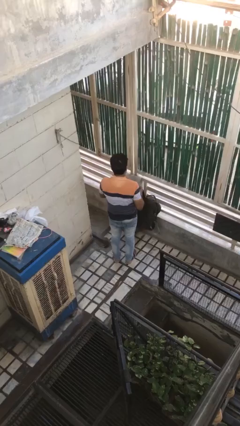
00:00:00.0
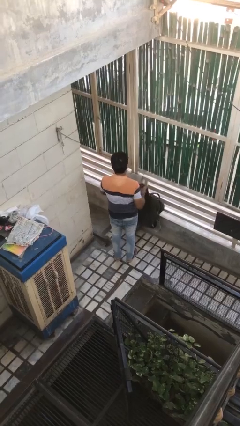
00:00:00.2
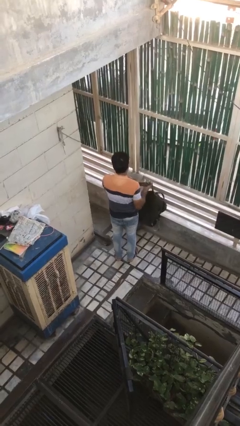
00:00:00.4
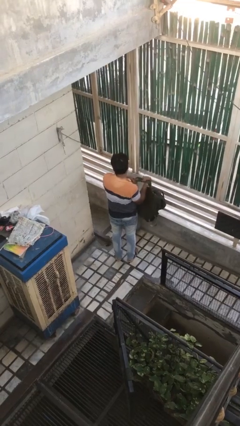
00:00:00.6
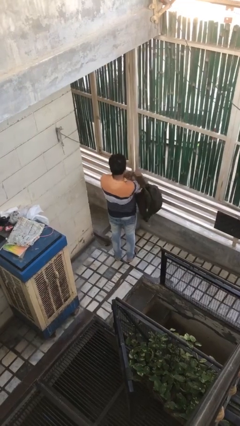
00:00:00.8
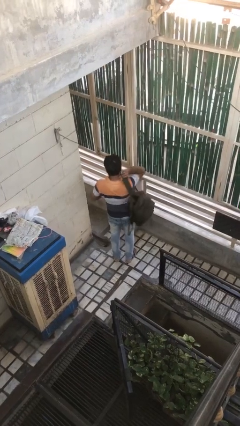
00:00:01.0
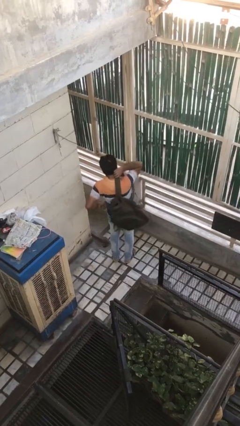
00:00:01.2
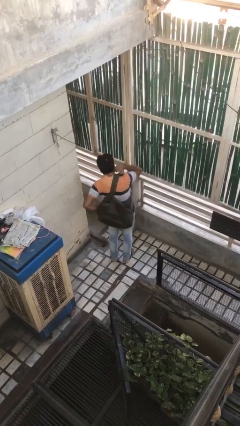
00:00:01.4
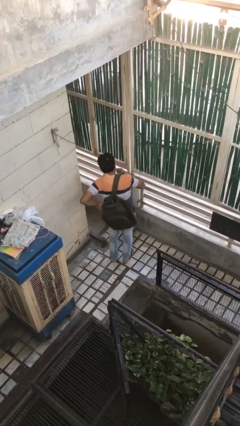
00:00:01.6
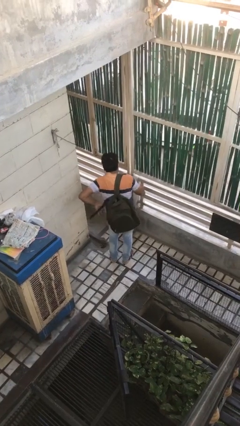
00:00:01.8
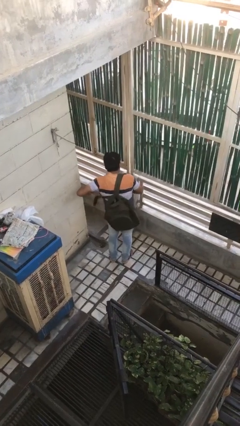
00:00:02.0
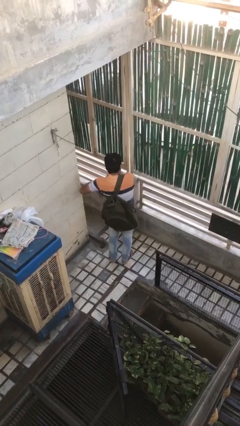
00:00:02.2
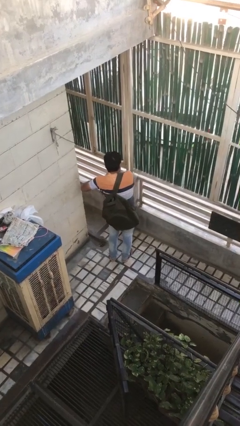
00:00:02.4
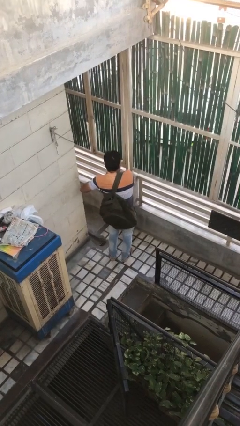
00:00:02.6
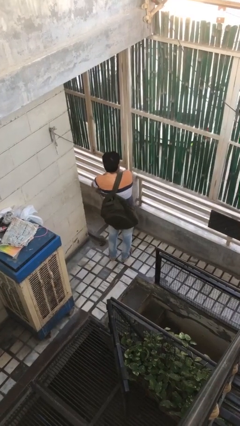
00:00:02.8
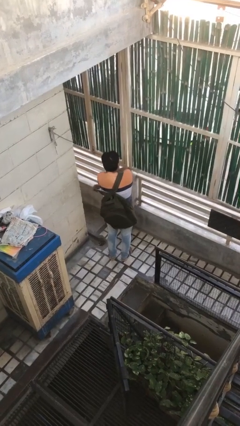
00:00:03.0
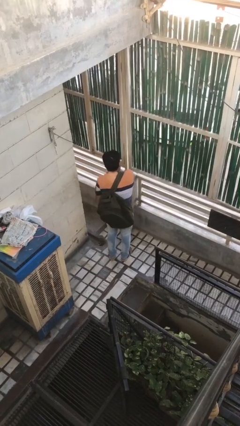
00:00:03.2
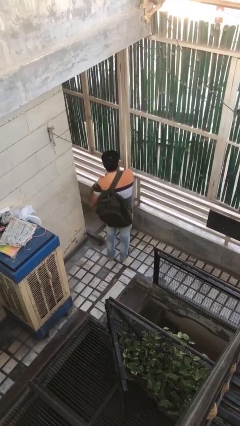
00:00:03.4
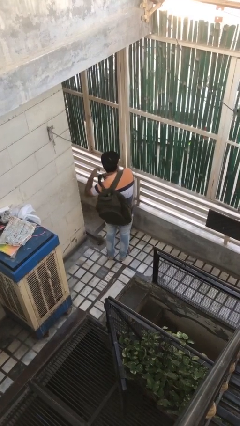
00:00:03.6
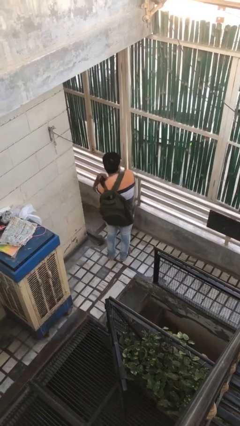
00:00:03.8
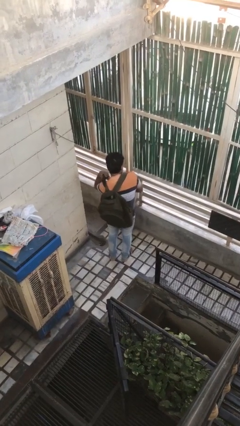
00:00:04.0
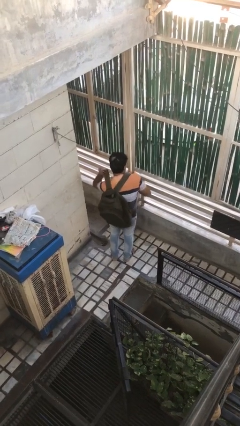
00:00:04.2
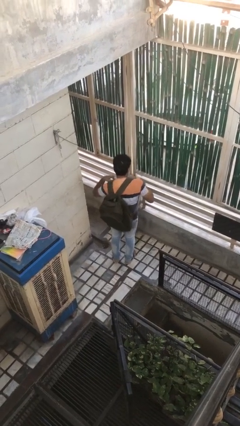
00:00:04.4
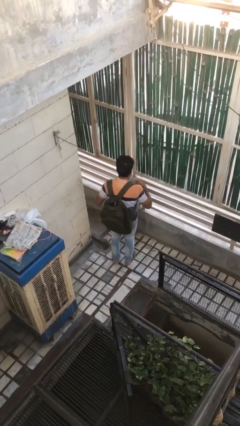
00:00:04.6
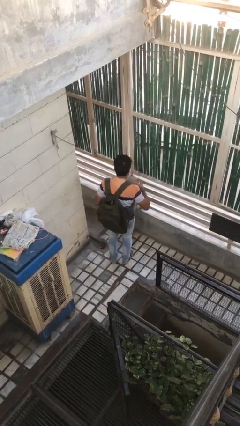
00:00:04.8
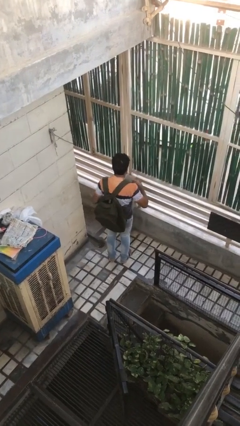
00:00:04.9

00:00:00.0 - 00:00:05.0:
person puts on backpack

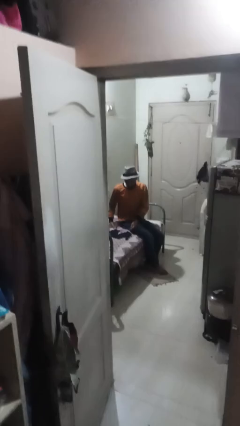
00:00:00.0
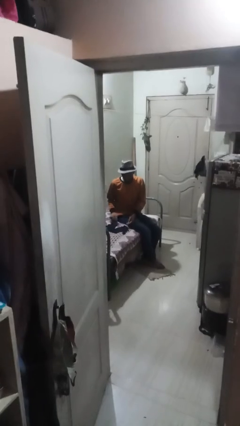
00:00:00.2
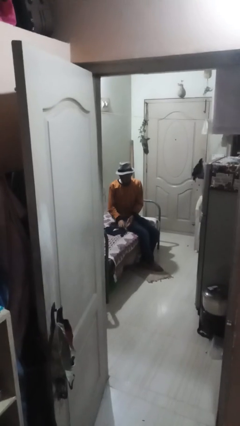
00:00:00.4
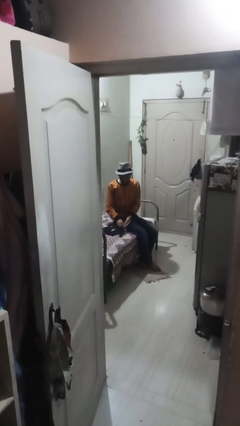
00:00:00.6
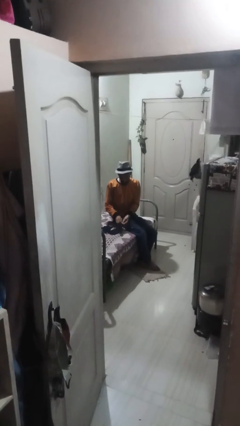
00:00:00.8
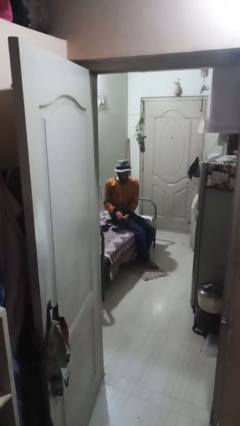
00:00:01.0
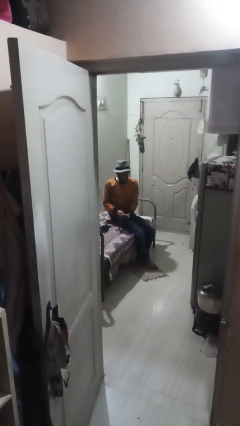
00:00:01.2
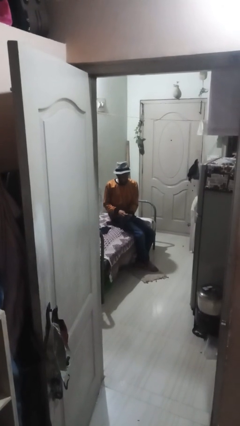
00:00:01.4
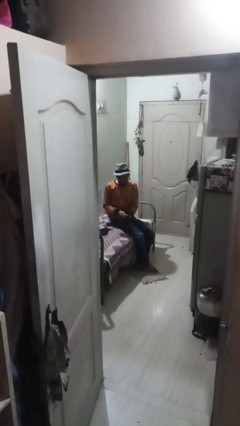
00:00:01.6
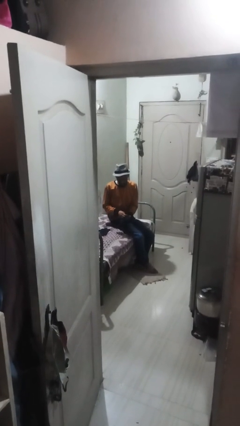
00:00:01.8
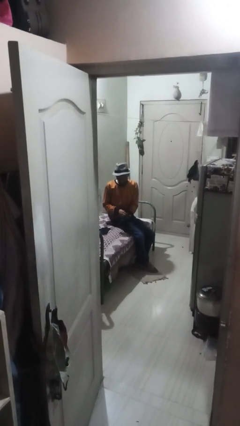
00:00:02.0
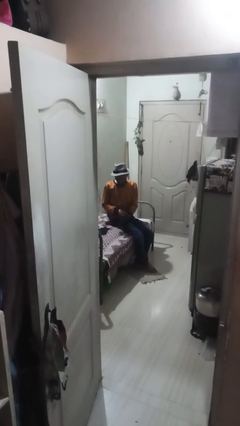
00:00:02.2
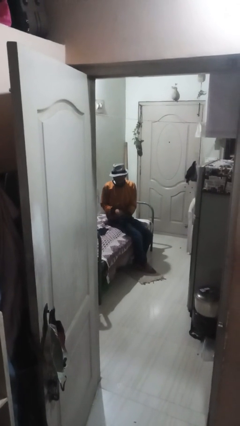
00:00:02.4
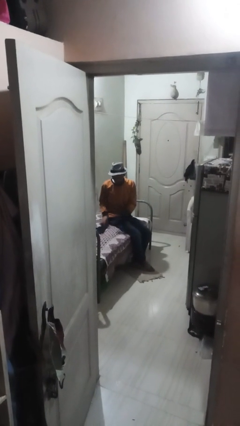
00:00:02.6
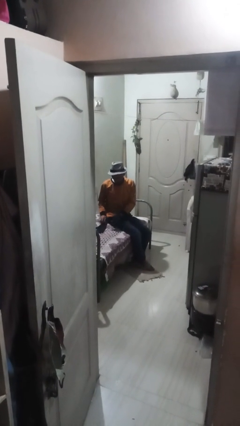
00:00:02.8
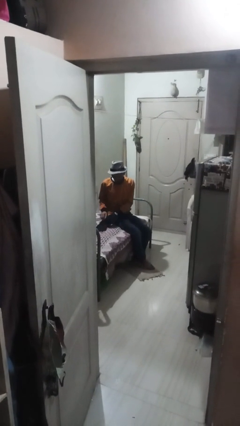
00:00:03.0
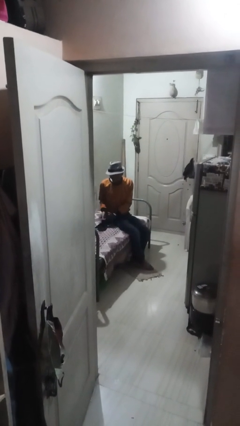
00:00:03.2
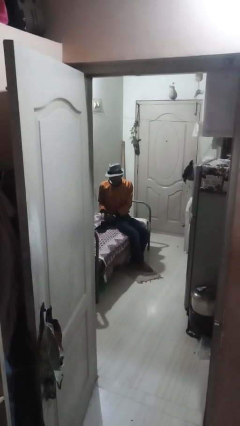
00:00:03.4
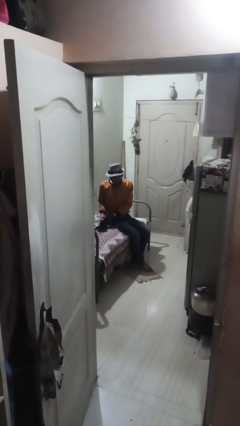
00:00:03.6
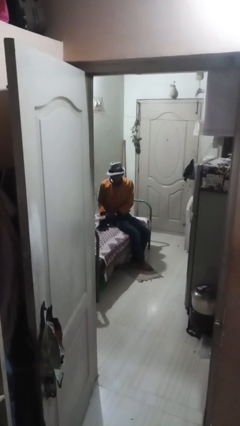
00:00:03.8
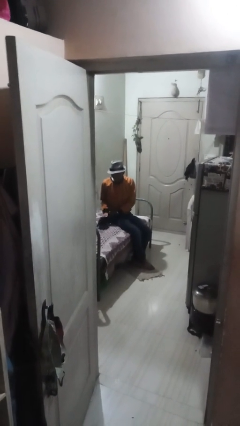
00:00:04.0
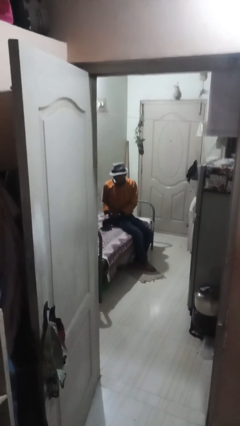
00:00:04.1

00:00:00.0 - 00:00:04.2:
person puts on gloves

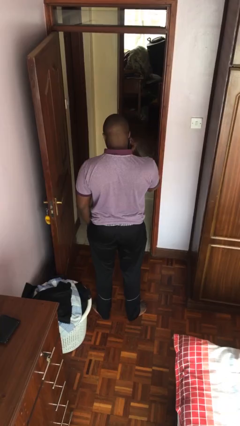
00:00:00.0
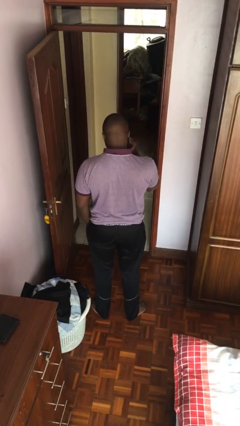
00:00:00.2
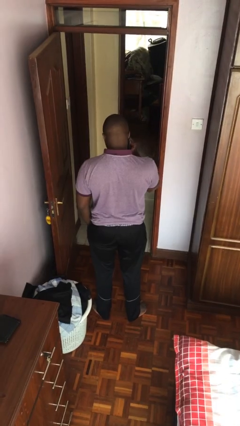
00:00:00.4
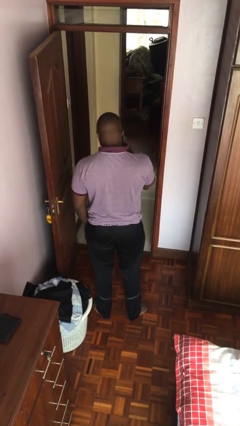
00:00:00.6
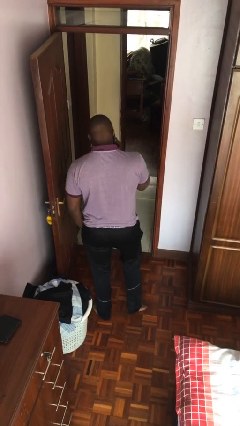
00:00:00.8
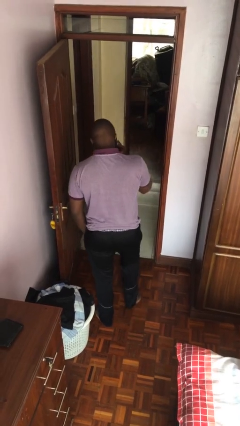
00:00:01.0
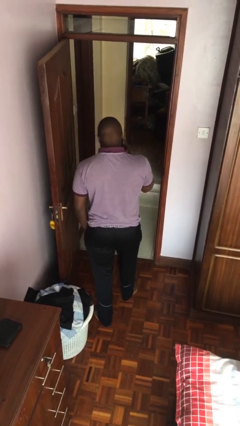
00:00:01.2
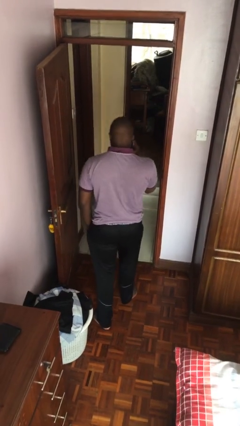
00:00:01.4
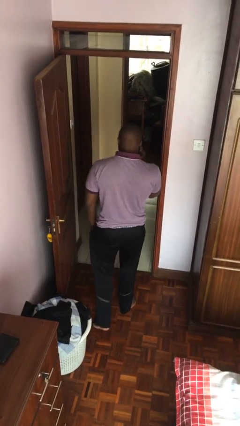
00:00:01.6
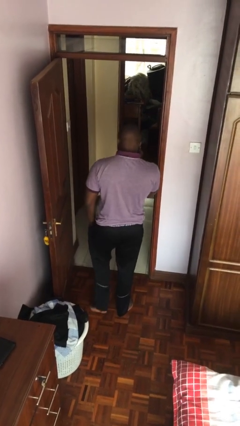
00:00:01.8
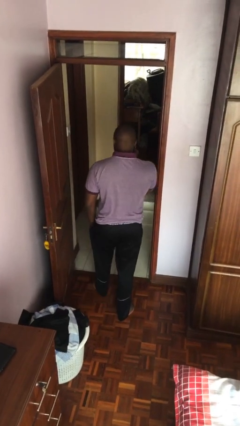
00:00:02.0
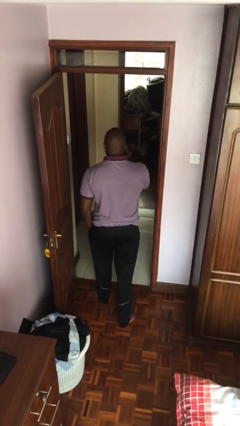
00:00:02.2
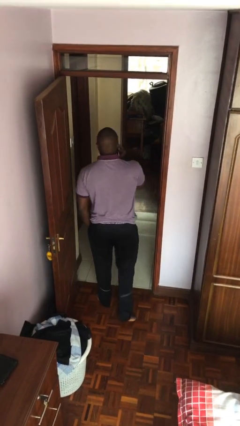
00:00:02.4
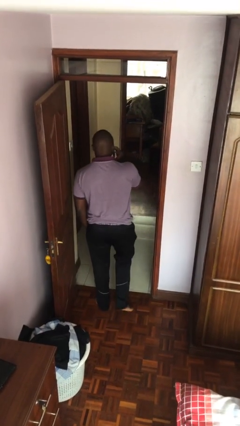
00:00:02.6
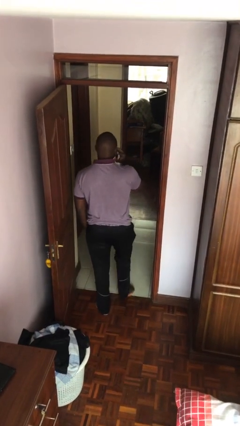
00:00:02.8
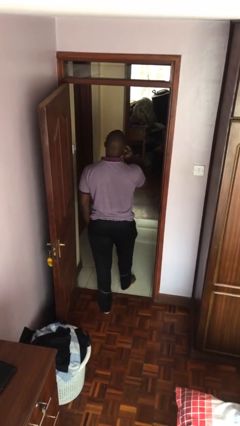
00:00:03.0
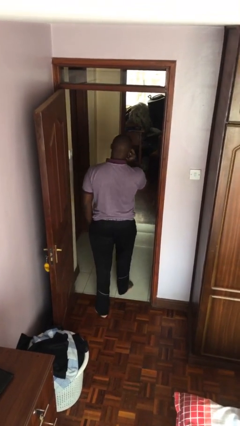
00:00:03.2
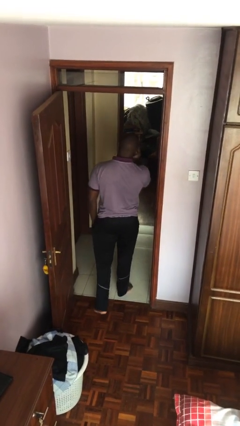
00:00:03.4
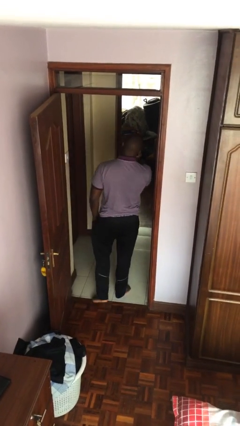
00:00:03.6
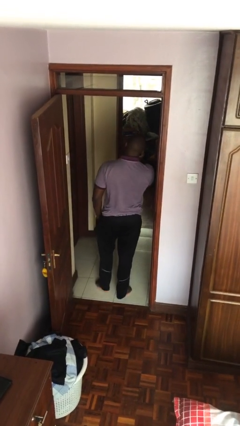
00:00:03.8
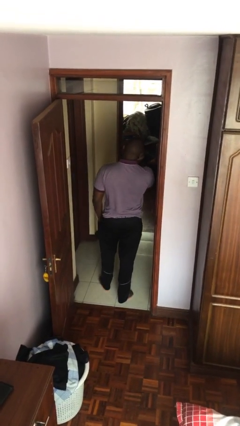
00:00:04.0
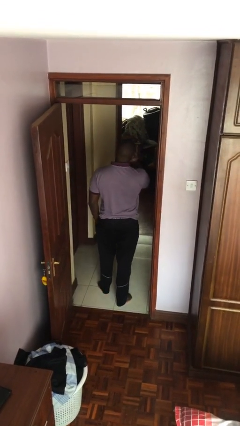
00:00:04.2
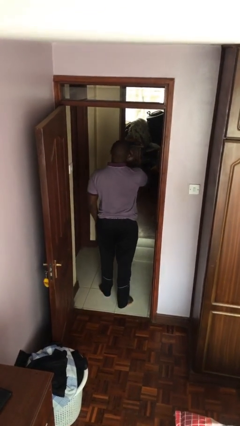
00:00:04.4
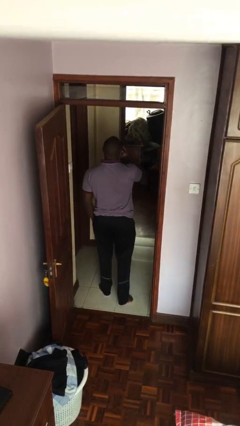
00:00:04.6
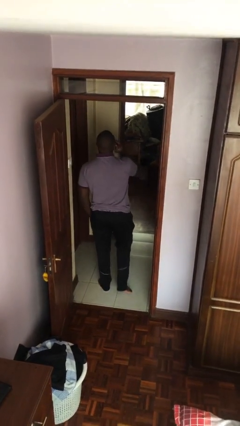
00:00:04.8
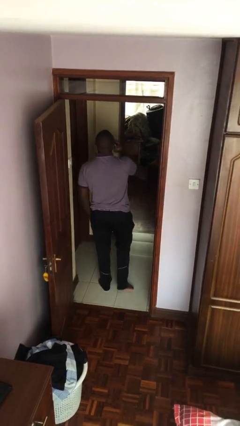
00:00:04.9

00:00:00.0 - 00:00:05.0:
person exits scene through structure

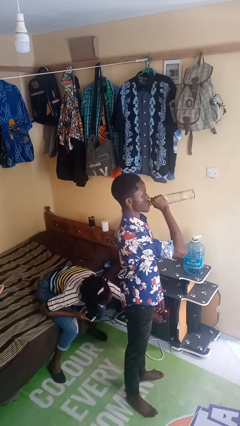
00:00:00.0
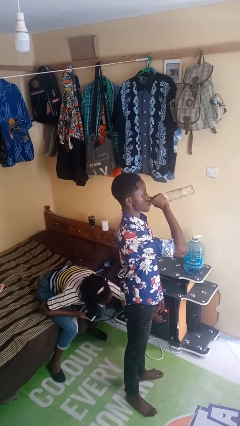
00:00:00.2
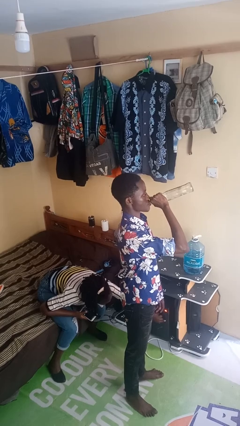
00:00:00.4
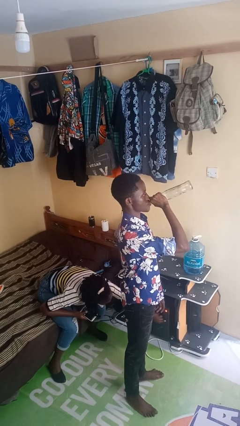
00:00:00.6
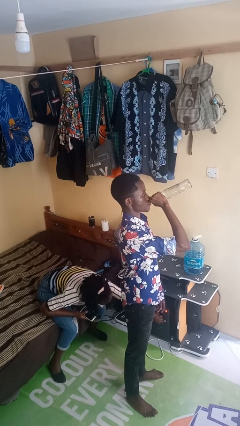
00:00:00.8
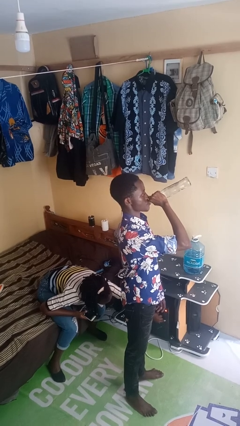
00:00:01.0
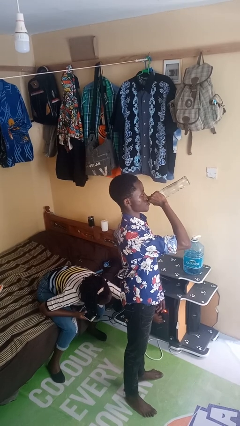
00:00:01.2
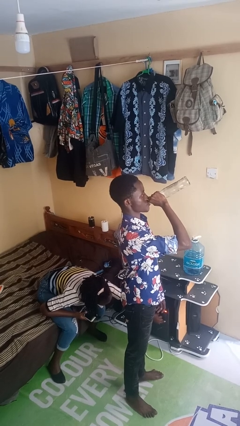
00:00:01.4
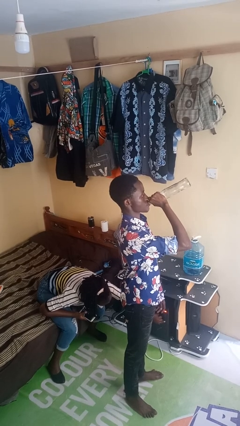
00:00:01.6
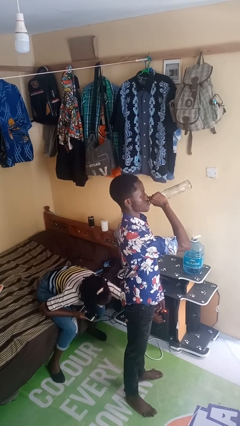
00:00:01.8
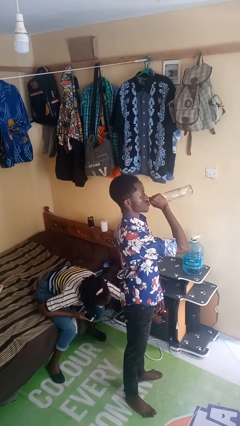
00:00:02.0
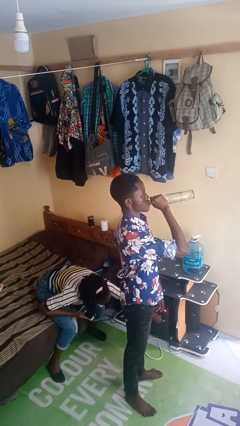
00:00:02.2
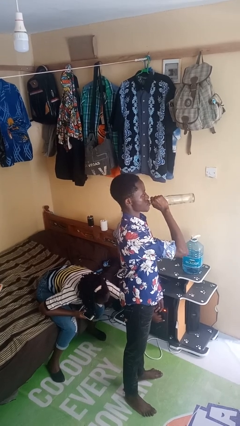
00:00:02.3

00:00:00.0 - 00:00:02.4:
person drinks from bottle

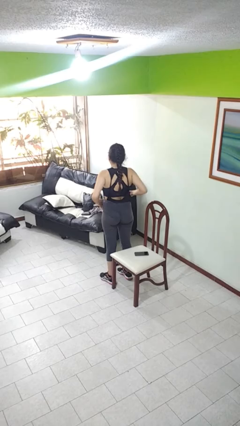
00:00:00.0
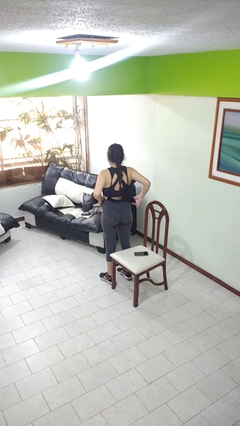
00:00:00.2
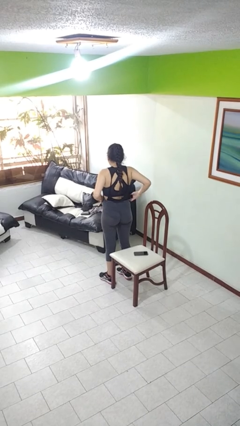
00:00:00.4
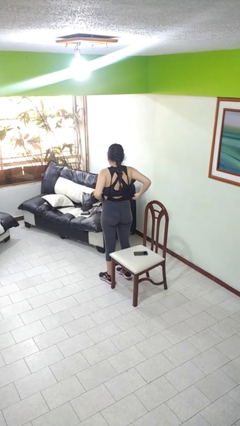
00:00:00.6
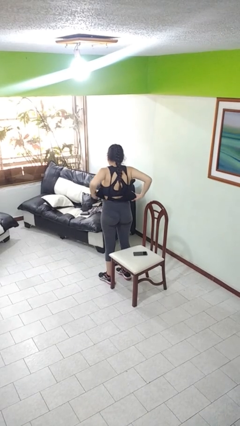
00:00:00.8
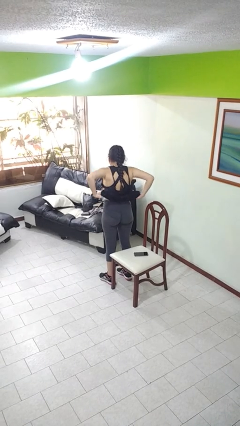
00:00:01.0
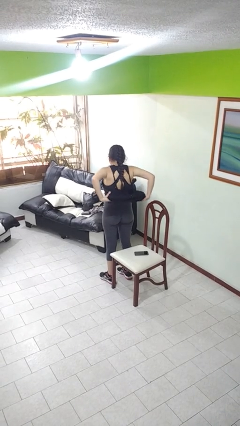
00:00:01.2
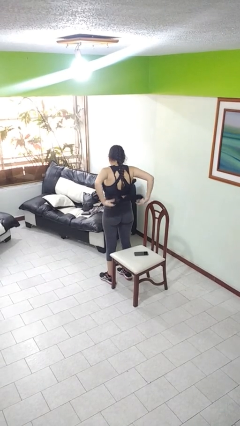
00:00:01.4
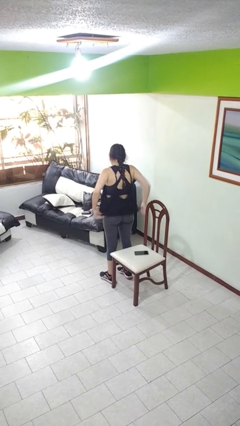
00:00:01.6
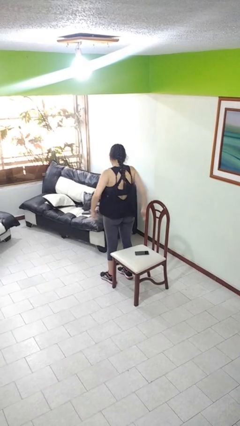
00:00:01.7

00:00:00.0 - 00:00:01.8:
person untucks shirt
